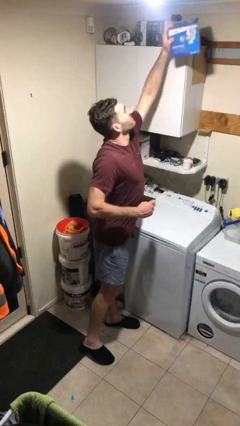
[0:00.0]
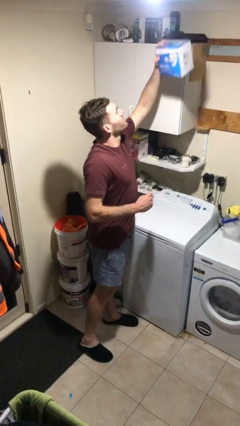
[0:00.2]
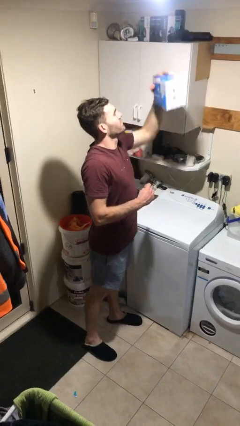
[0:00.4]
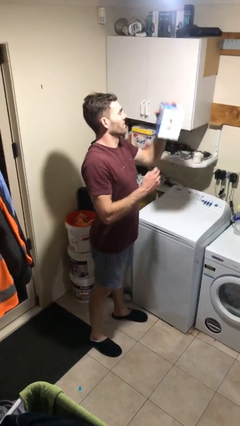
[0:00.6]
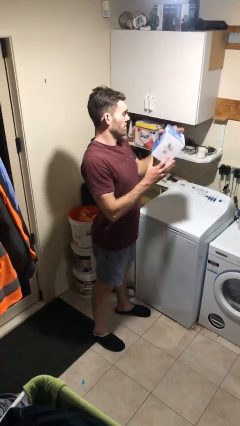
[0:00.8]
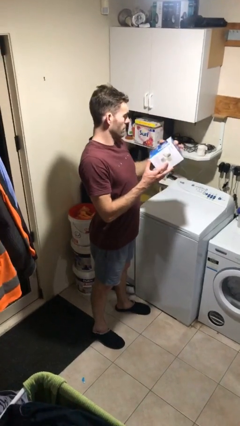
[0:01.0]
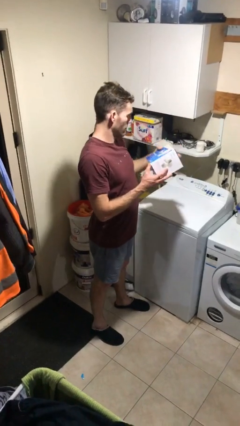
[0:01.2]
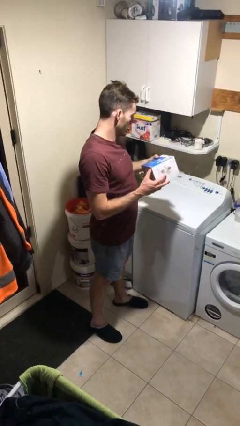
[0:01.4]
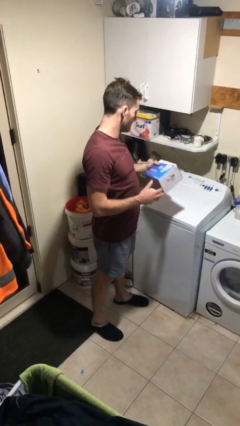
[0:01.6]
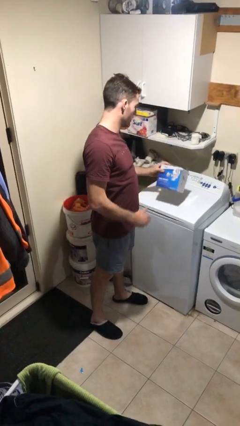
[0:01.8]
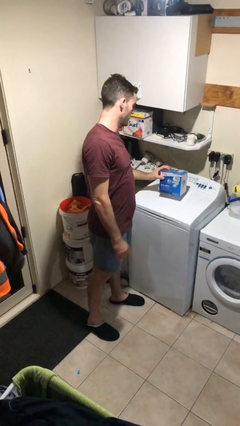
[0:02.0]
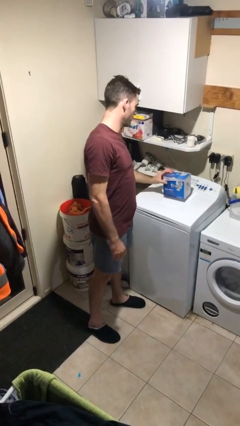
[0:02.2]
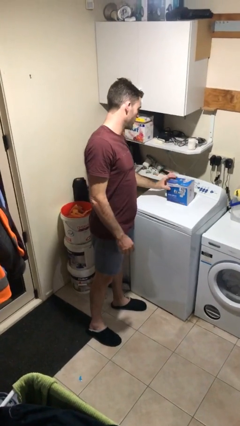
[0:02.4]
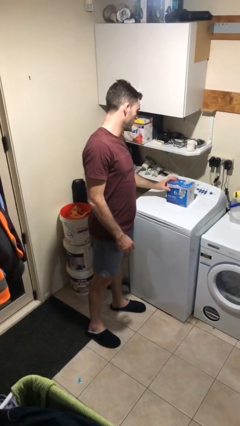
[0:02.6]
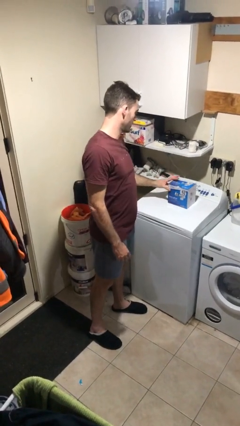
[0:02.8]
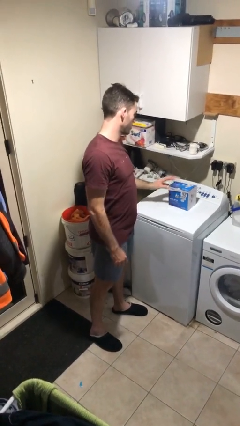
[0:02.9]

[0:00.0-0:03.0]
person puts down object on table

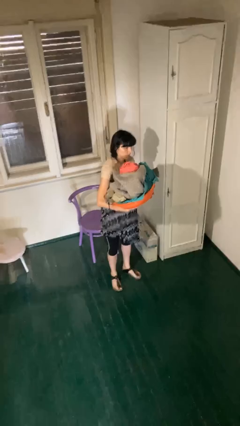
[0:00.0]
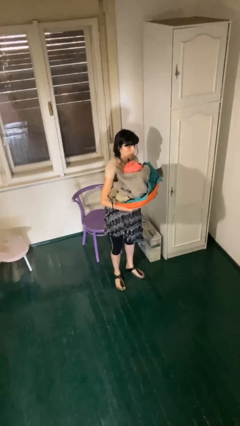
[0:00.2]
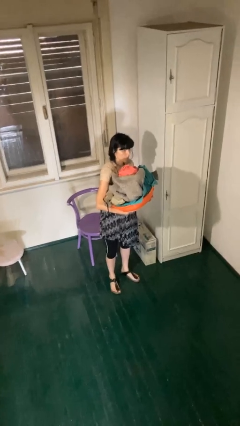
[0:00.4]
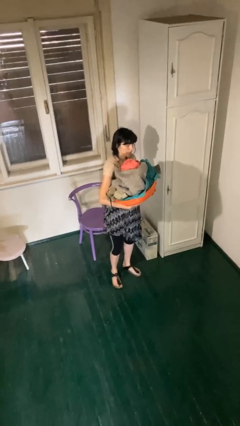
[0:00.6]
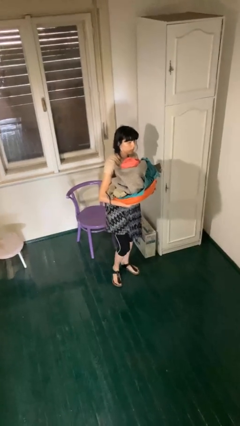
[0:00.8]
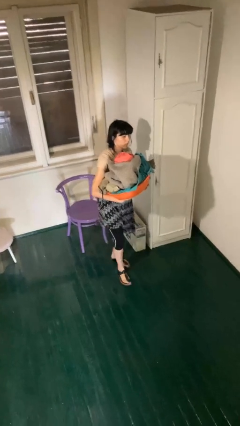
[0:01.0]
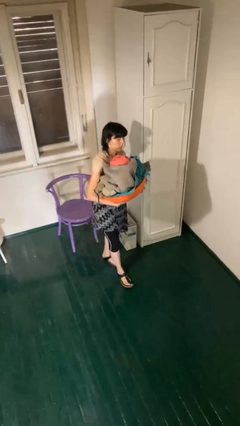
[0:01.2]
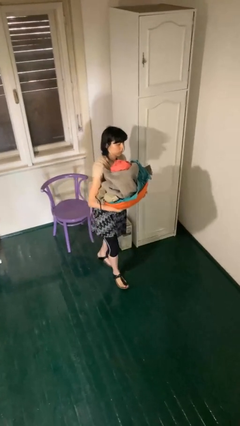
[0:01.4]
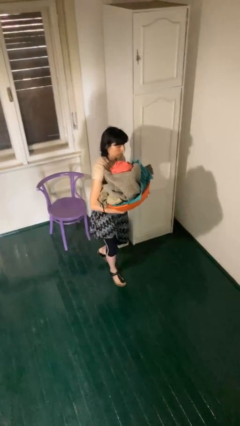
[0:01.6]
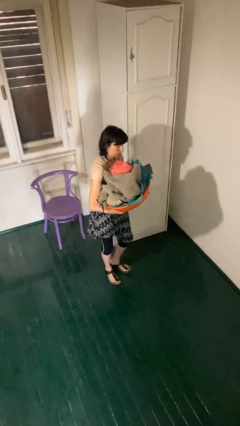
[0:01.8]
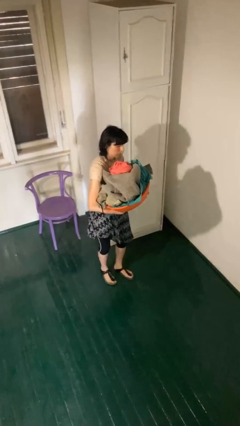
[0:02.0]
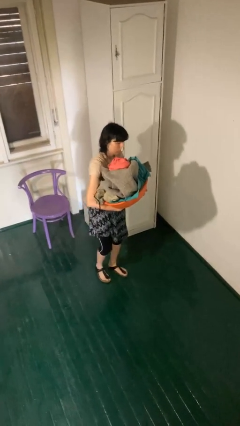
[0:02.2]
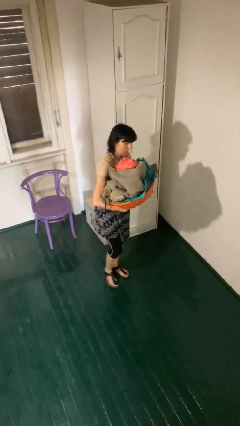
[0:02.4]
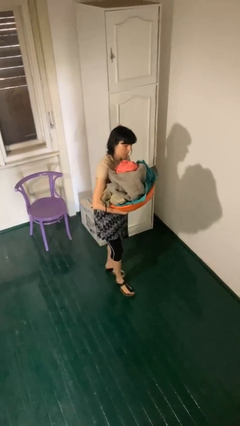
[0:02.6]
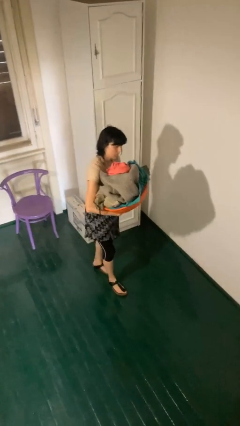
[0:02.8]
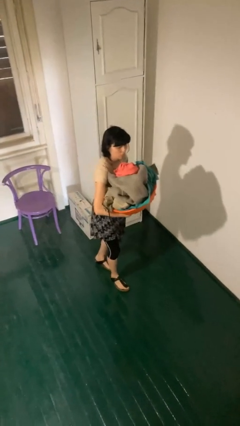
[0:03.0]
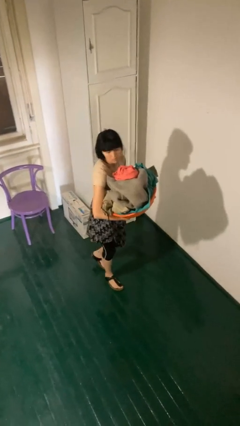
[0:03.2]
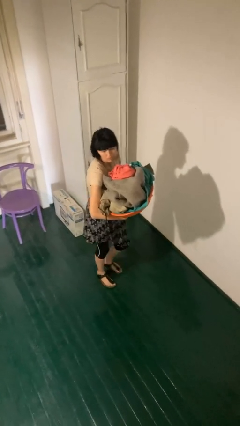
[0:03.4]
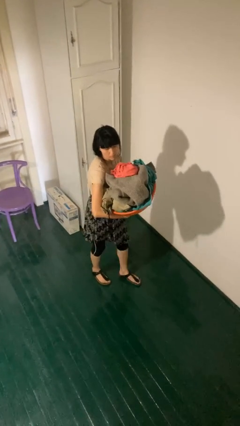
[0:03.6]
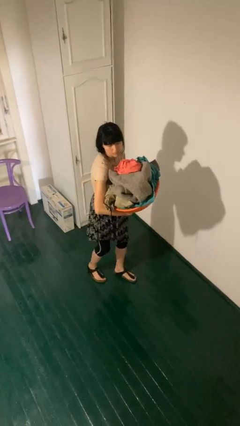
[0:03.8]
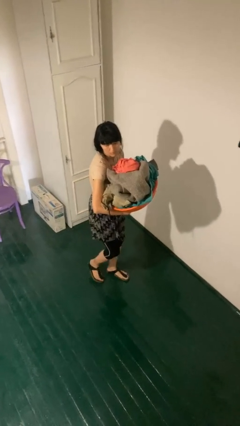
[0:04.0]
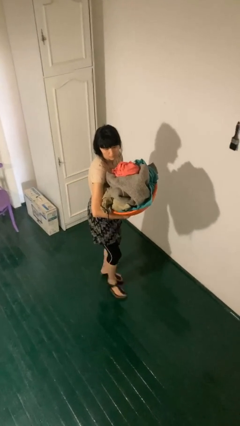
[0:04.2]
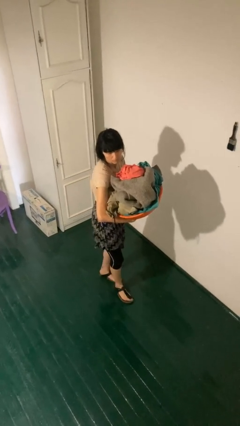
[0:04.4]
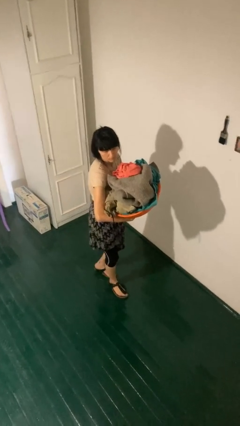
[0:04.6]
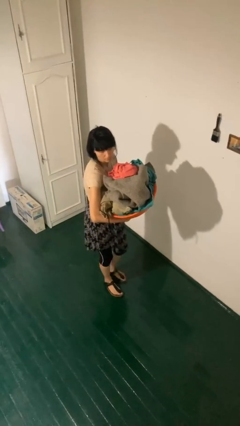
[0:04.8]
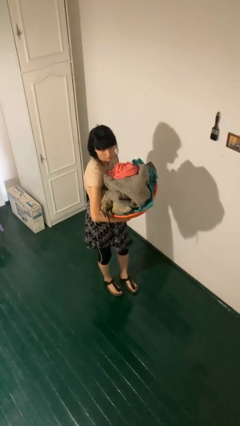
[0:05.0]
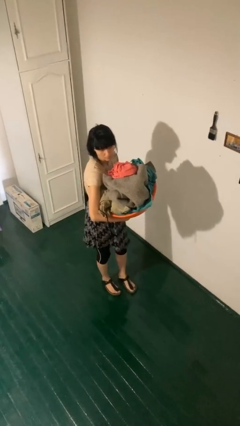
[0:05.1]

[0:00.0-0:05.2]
person carries laundry basket

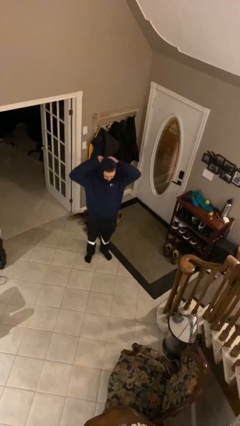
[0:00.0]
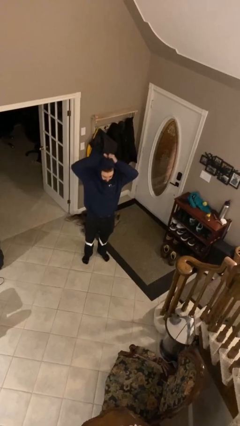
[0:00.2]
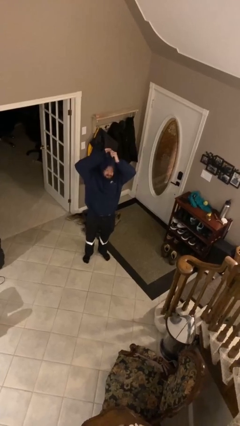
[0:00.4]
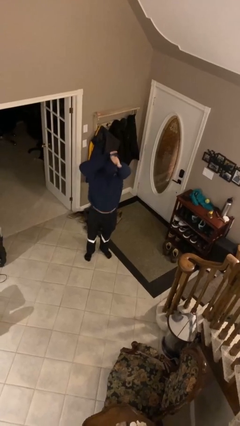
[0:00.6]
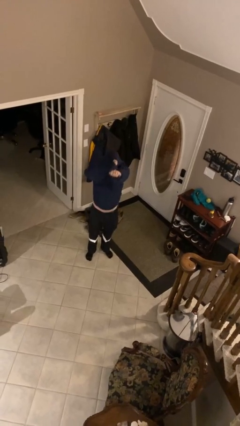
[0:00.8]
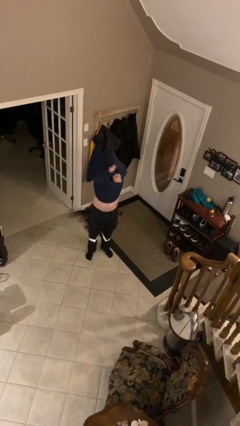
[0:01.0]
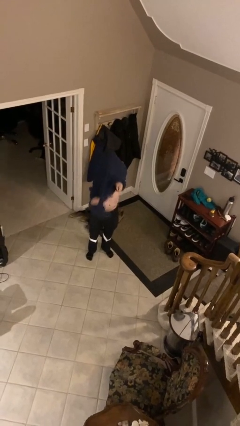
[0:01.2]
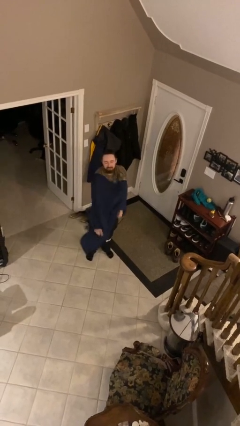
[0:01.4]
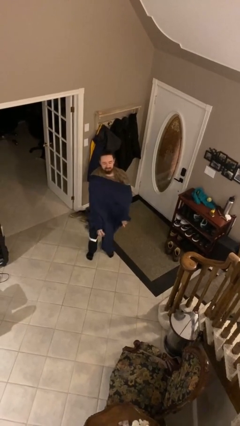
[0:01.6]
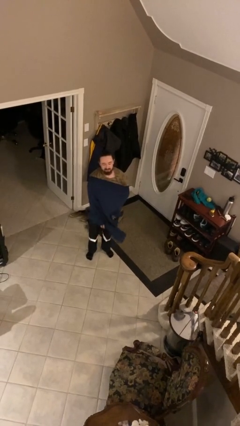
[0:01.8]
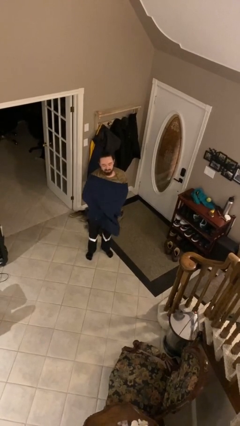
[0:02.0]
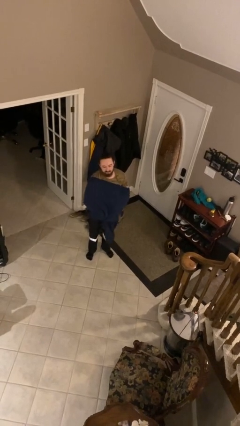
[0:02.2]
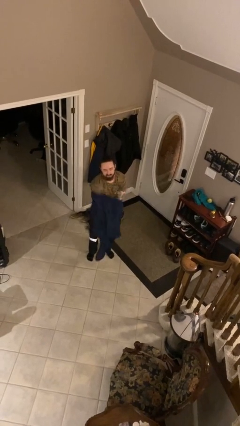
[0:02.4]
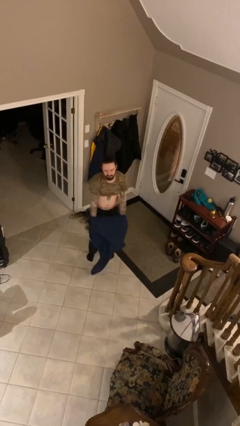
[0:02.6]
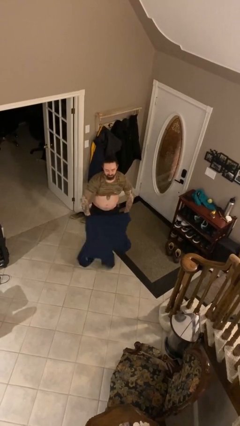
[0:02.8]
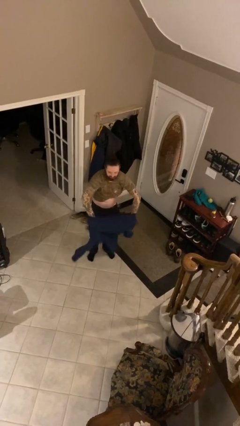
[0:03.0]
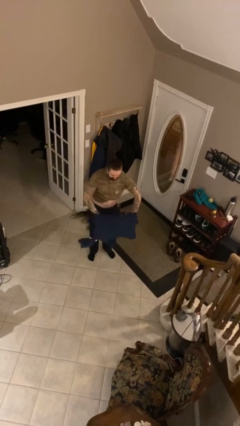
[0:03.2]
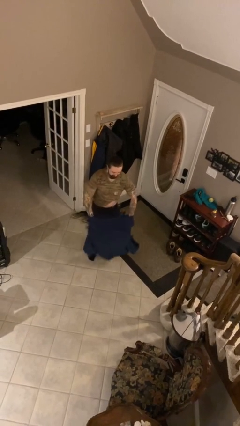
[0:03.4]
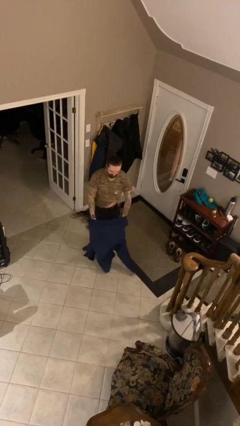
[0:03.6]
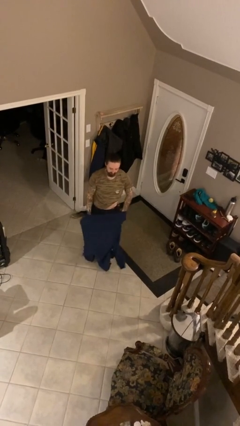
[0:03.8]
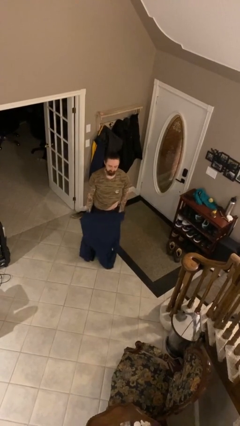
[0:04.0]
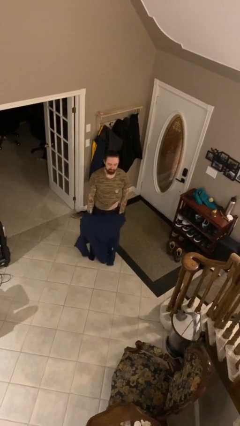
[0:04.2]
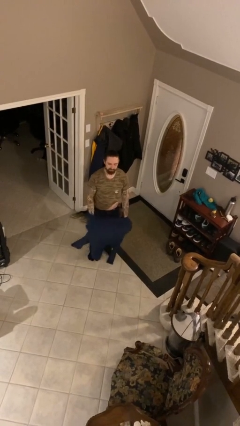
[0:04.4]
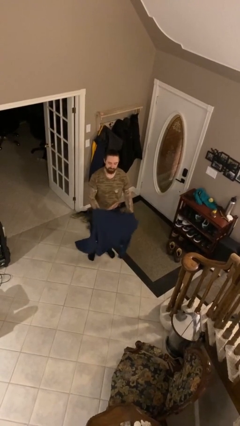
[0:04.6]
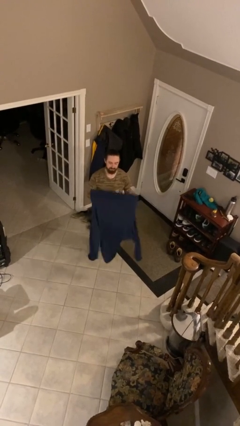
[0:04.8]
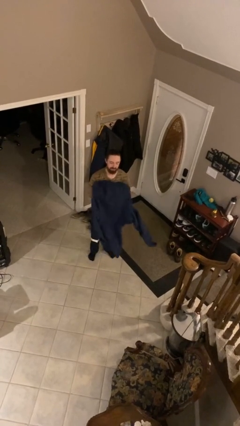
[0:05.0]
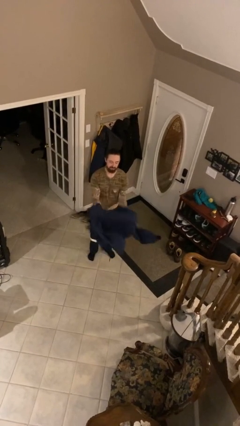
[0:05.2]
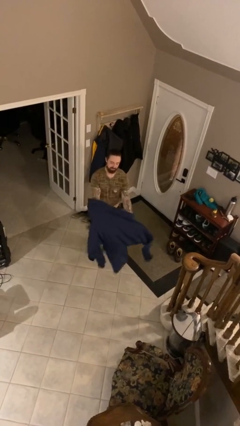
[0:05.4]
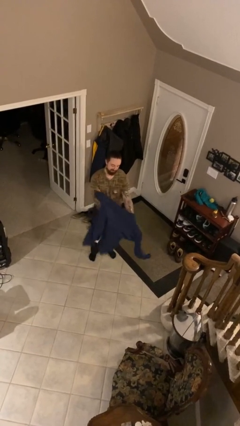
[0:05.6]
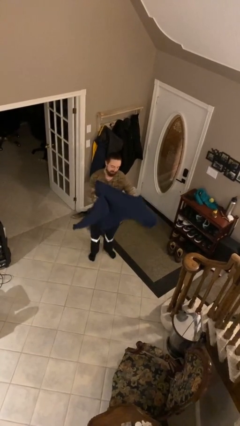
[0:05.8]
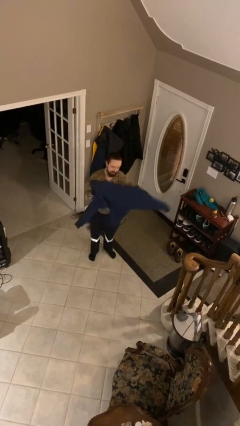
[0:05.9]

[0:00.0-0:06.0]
person takes off hoodie

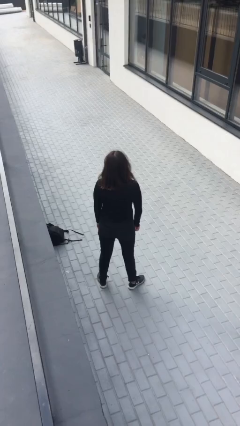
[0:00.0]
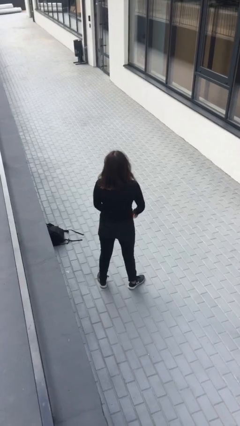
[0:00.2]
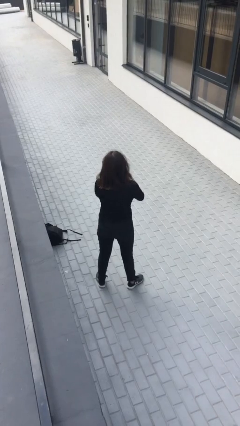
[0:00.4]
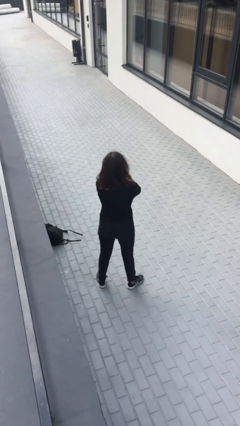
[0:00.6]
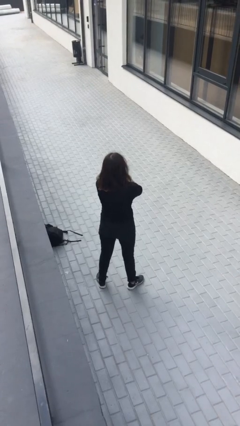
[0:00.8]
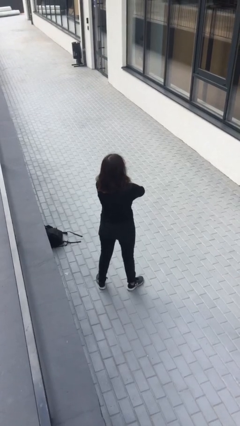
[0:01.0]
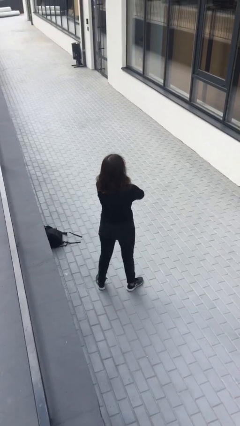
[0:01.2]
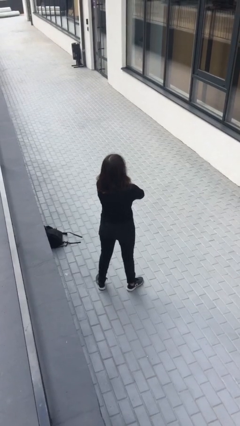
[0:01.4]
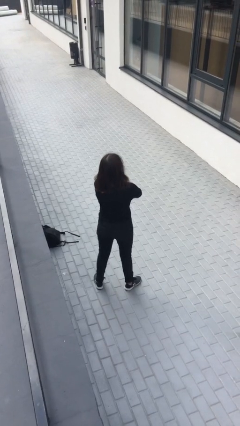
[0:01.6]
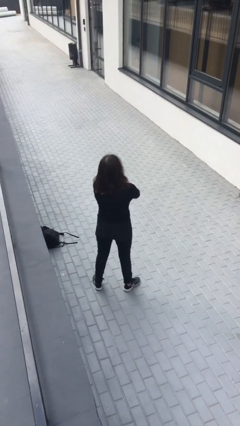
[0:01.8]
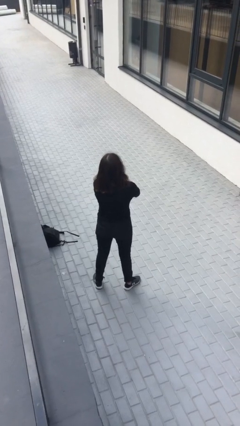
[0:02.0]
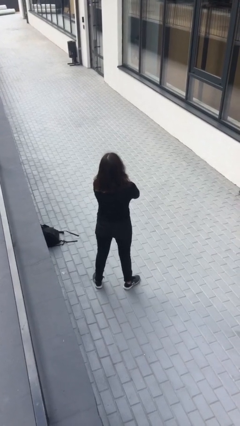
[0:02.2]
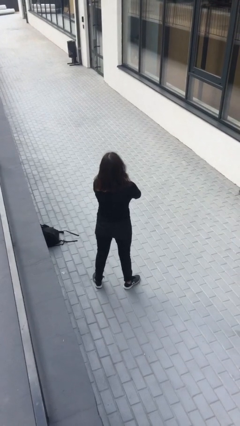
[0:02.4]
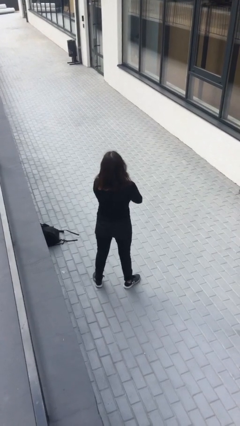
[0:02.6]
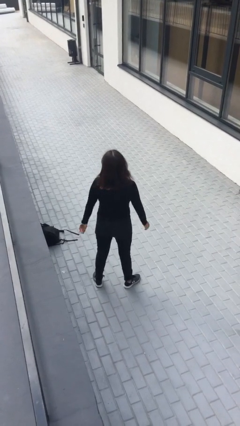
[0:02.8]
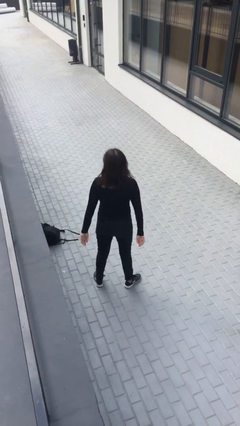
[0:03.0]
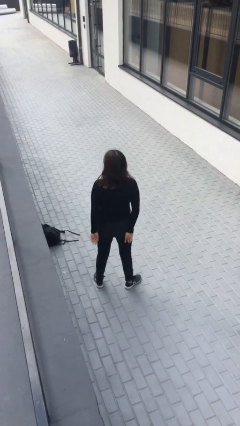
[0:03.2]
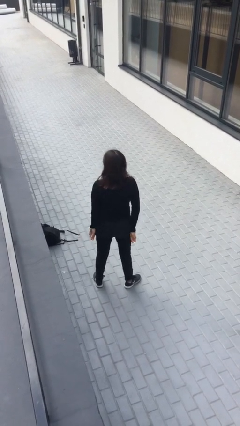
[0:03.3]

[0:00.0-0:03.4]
person crosses arms
